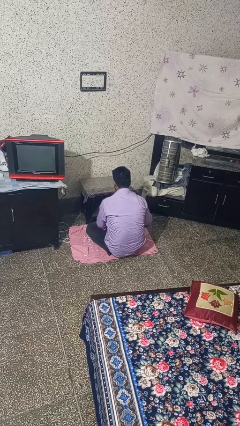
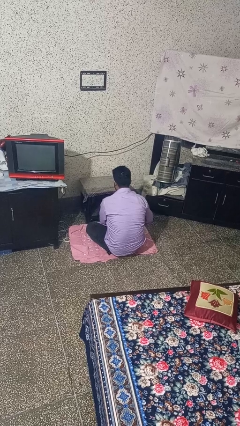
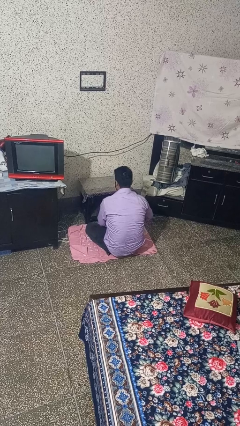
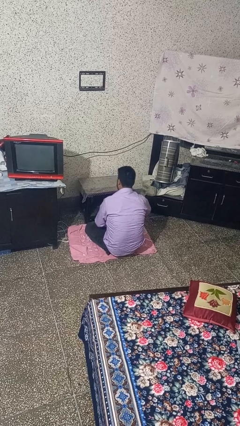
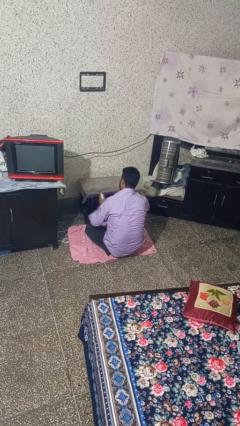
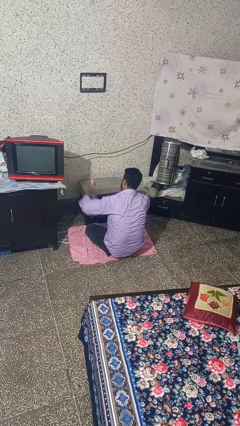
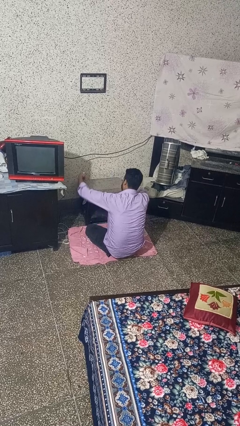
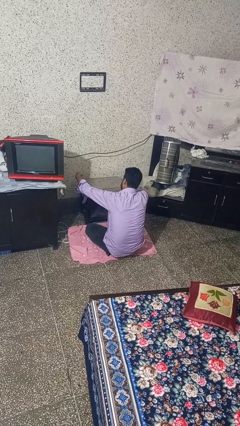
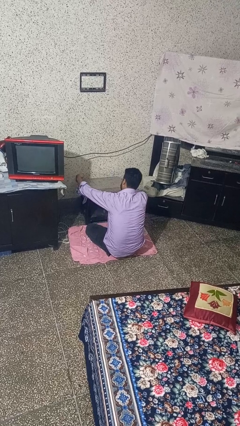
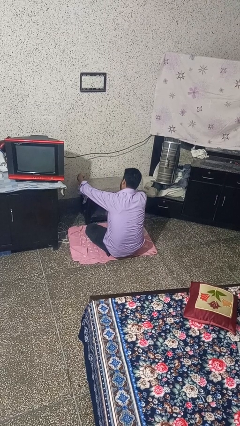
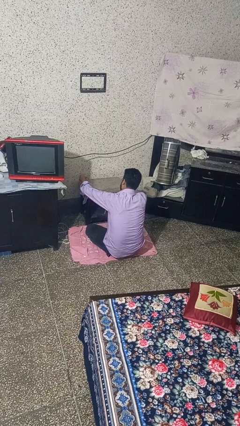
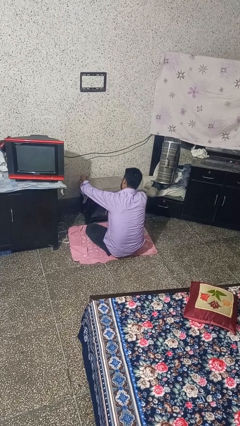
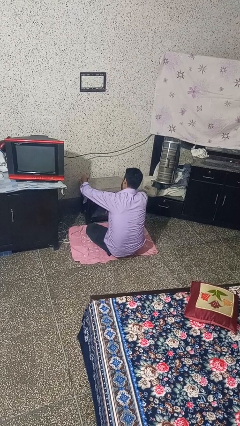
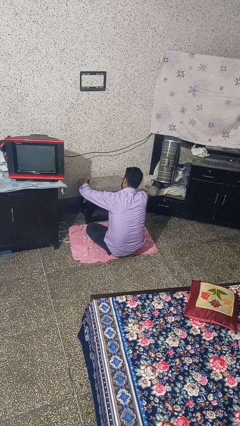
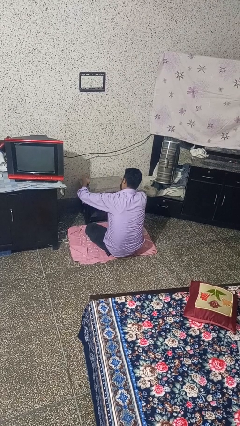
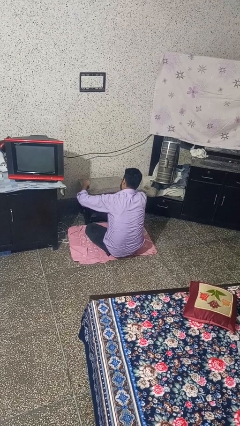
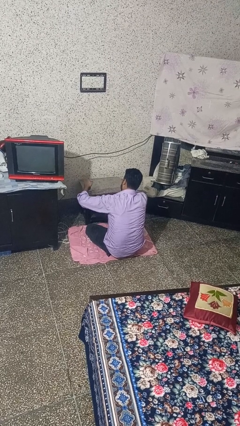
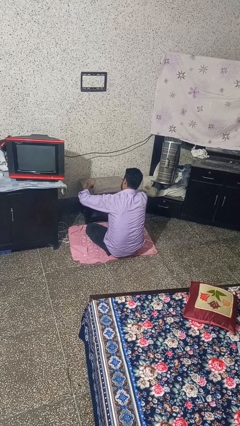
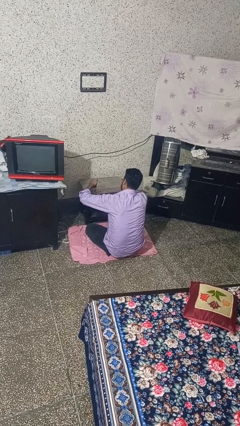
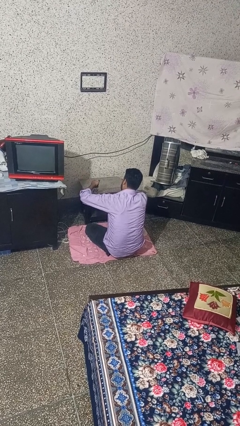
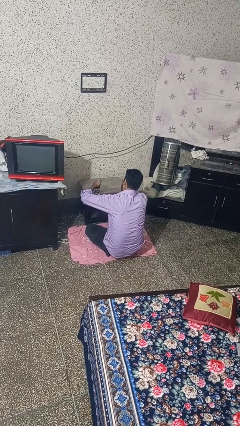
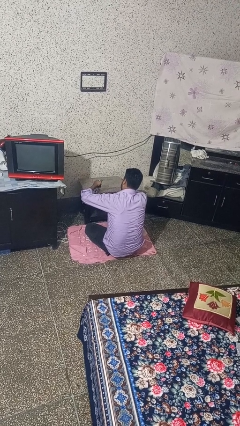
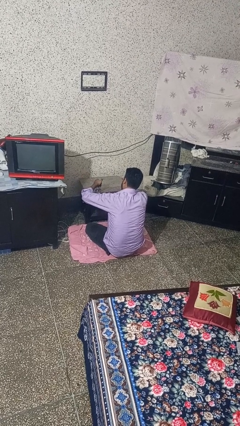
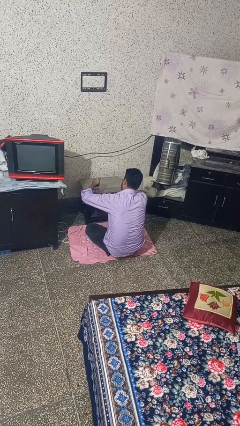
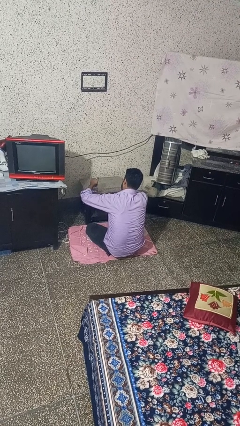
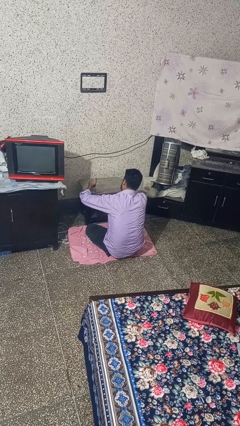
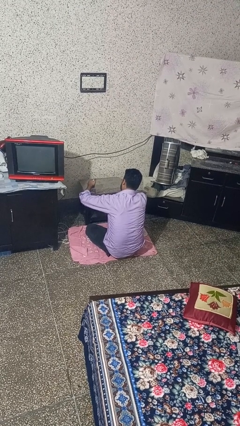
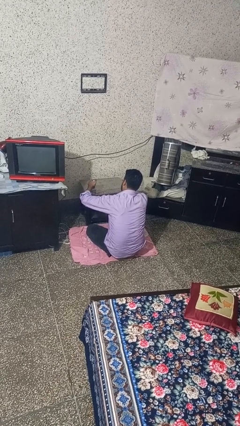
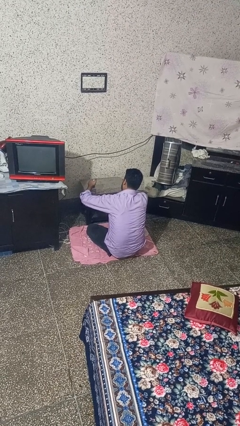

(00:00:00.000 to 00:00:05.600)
person sprays from bottle

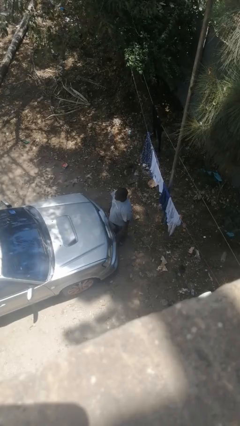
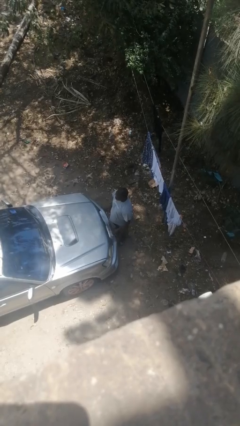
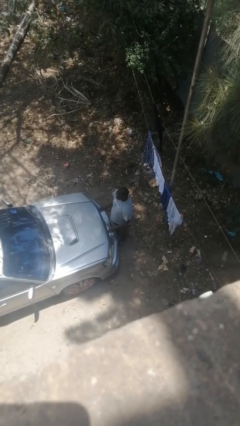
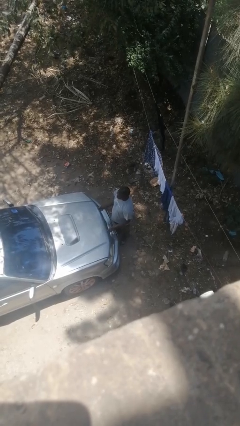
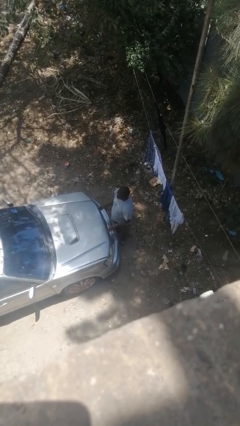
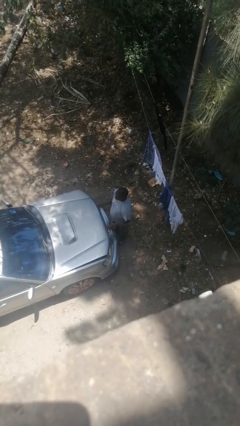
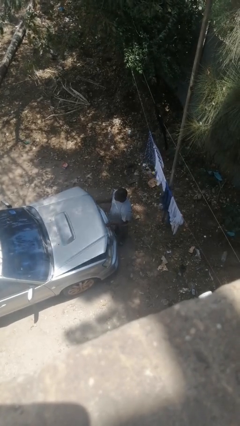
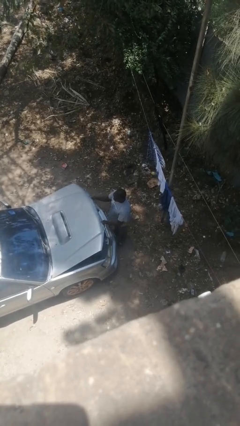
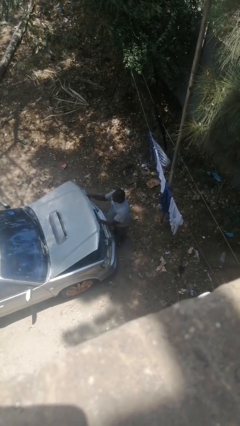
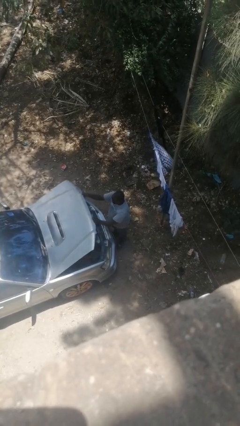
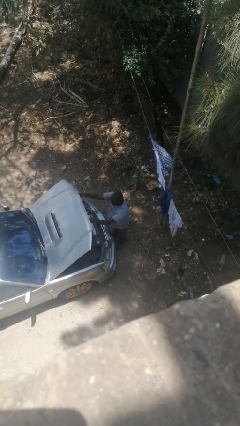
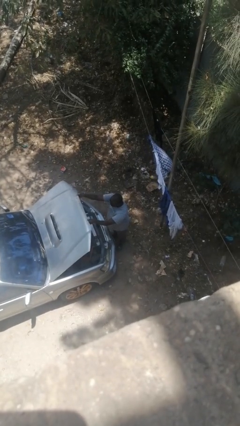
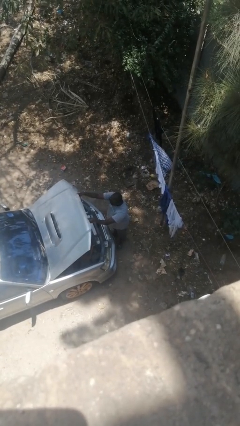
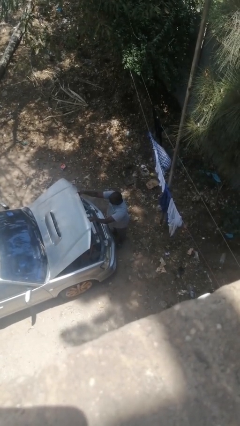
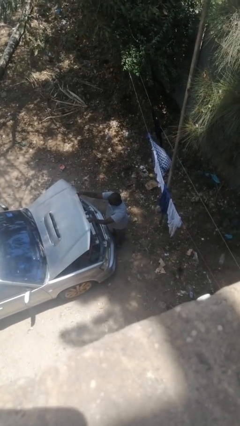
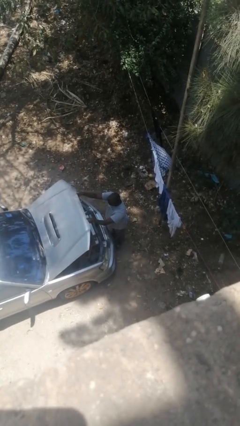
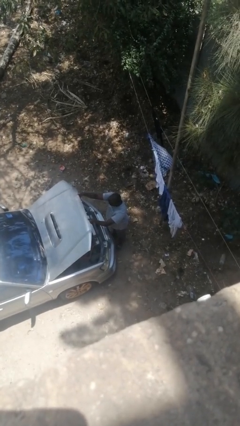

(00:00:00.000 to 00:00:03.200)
person opens car hood

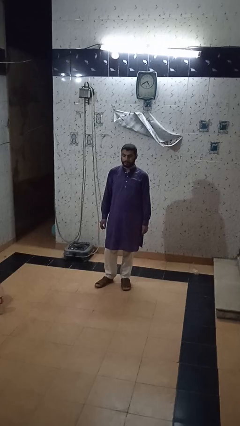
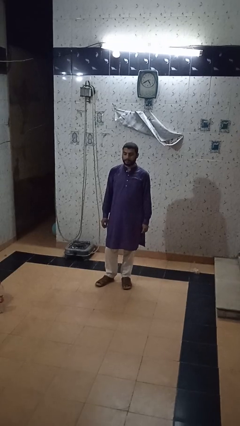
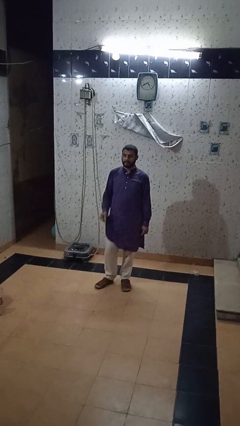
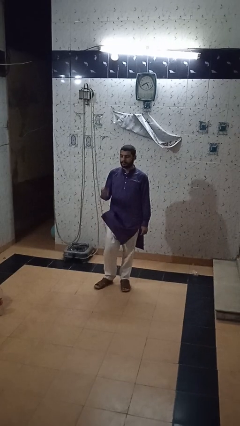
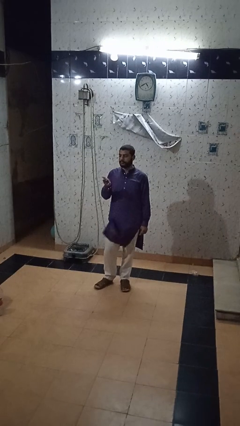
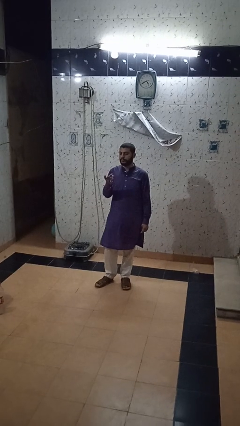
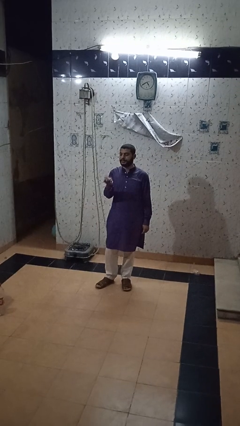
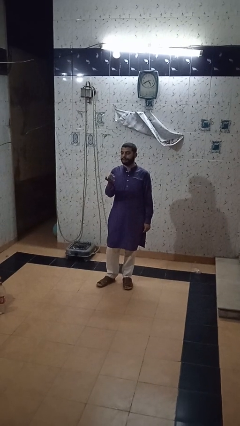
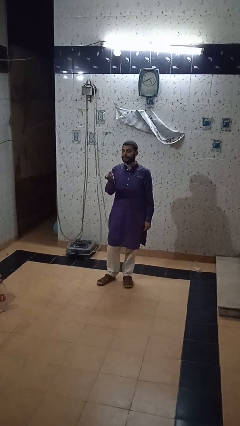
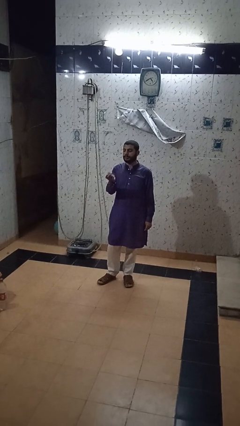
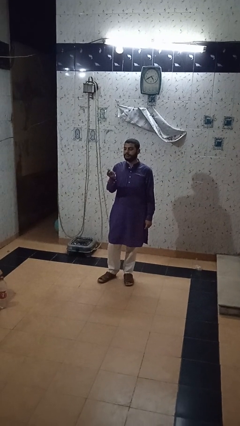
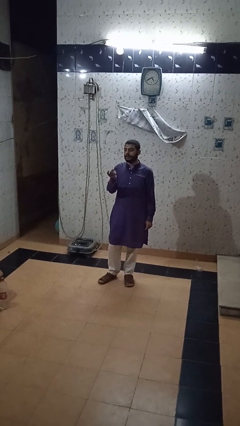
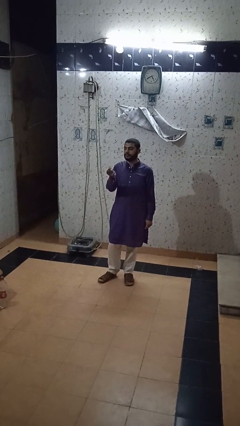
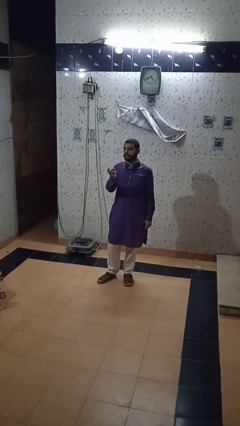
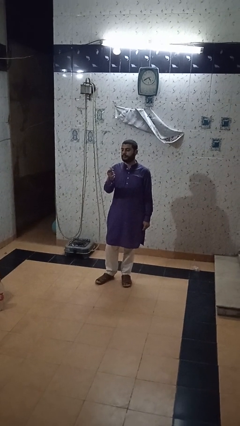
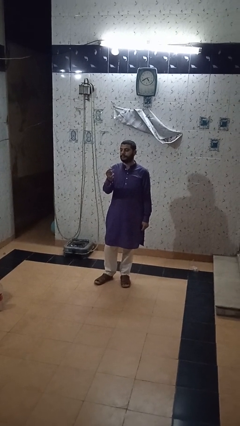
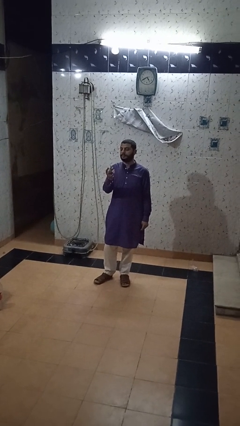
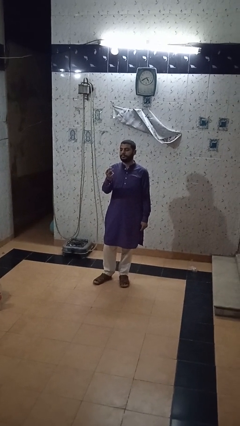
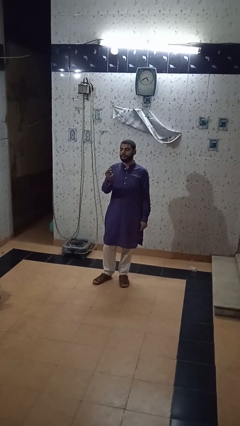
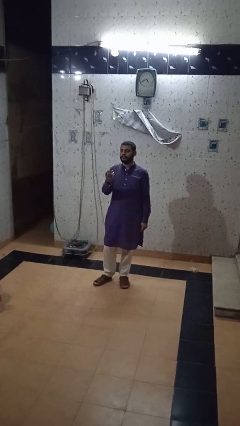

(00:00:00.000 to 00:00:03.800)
person snaps fingers

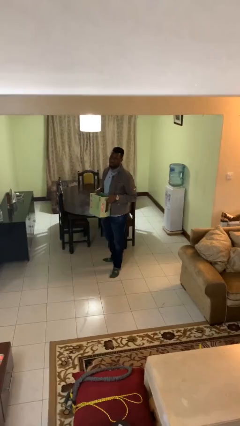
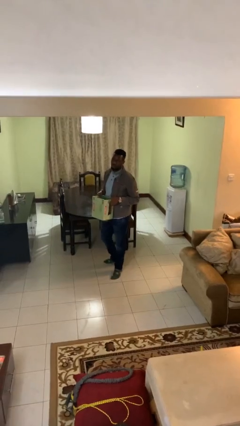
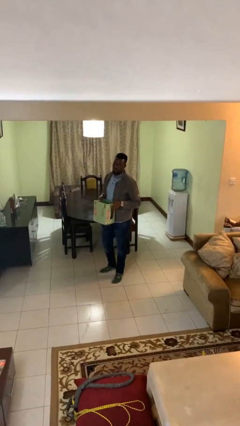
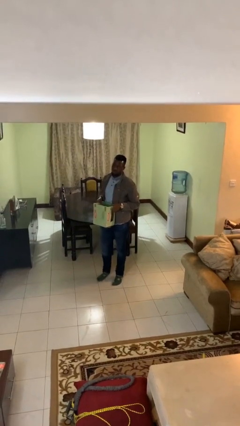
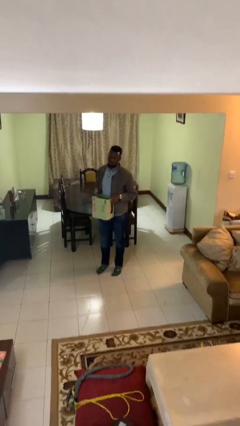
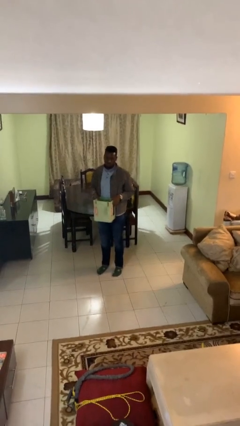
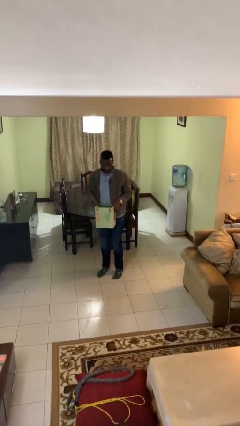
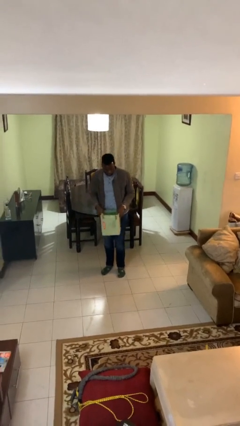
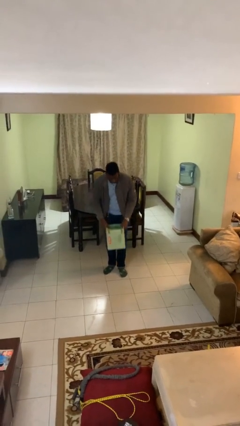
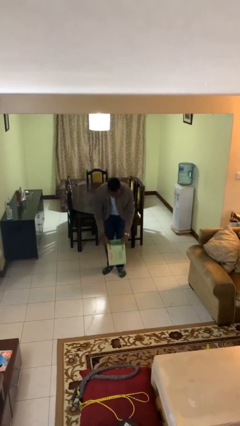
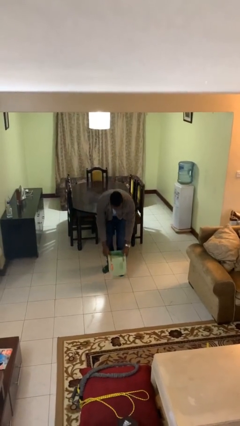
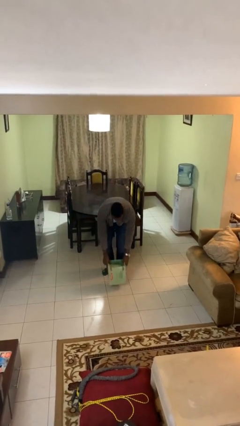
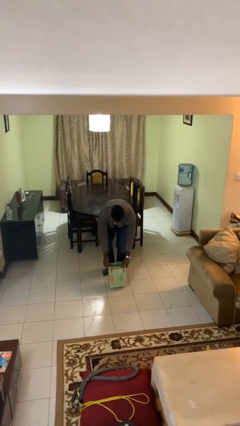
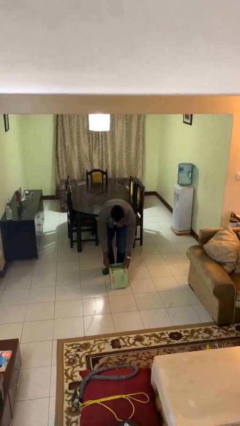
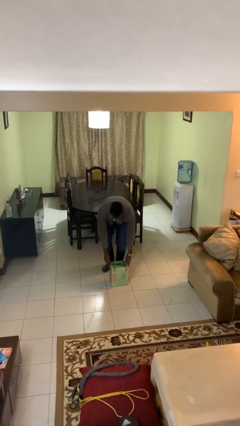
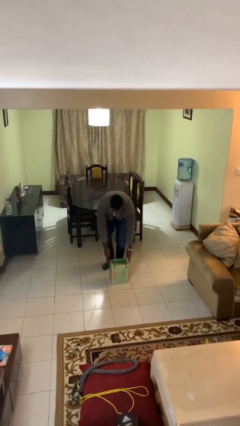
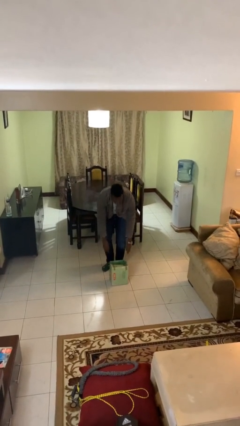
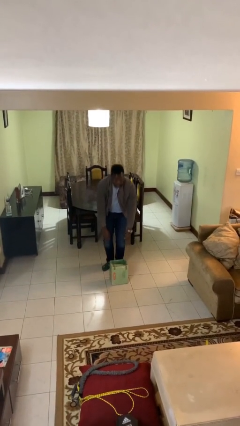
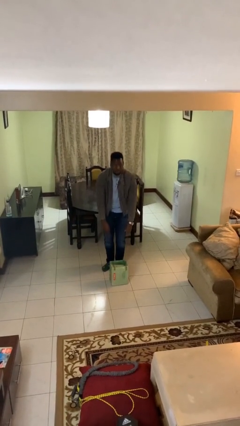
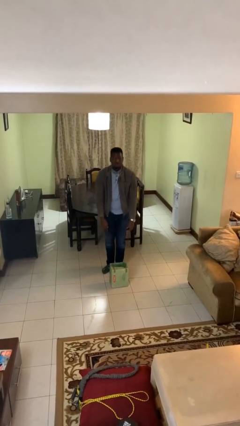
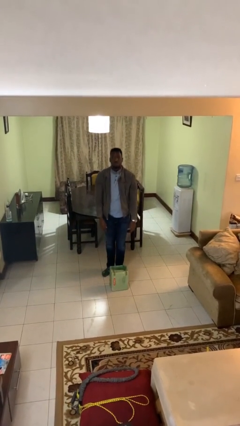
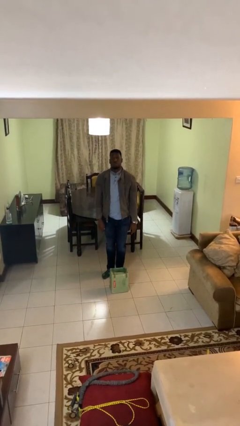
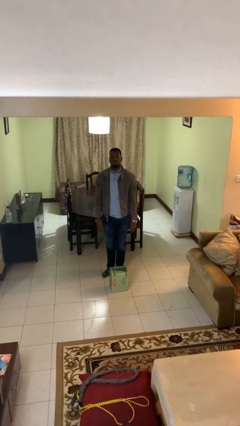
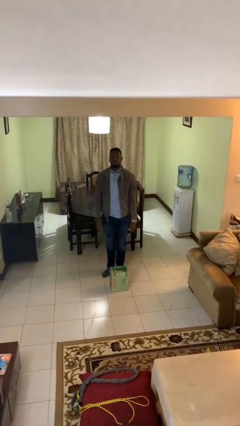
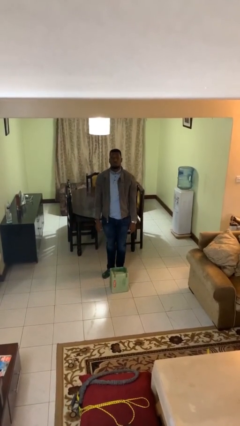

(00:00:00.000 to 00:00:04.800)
person puts down object on floor

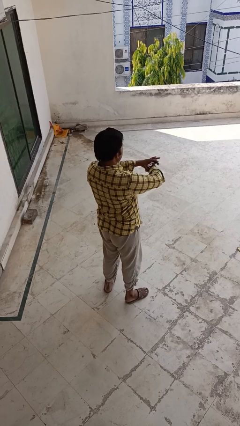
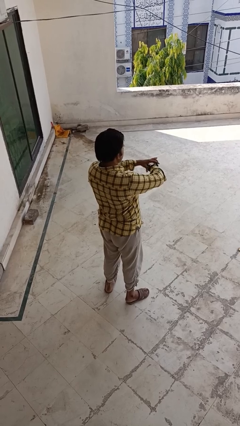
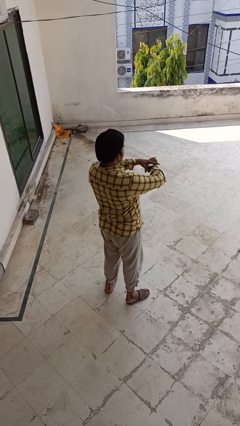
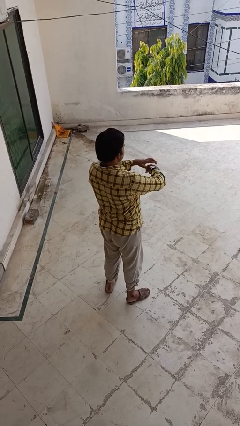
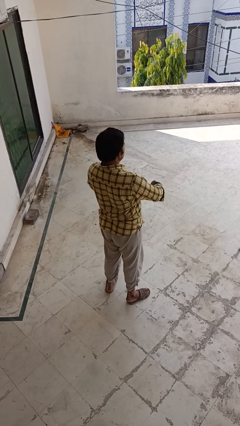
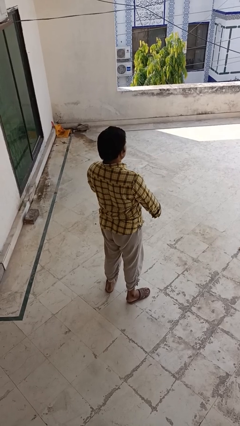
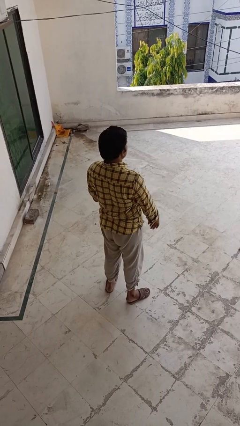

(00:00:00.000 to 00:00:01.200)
person puts on wristwatch
